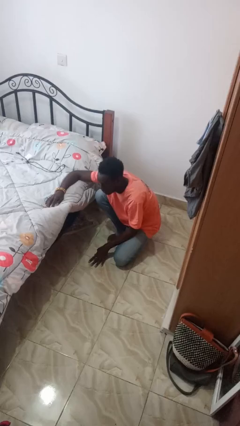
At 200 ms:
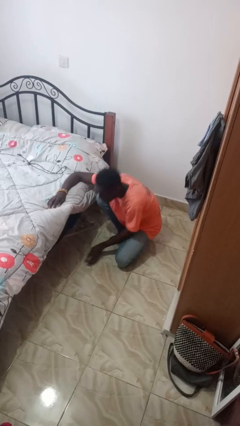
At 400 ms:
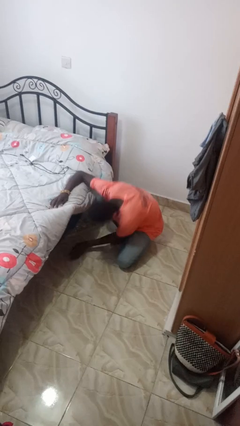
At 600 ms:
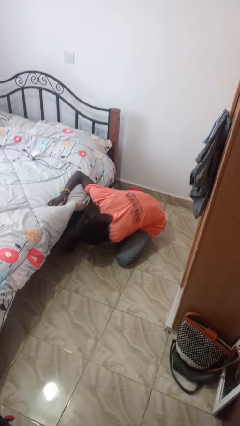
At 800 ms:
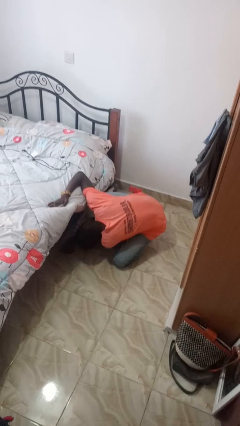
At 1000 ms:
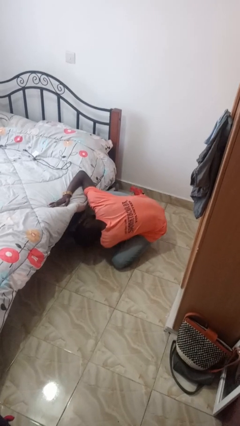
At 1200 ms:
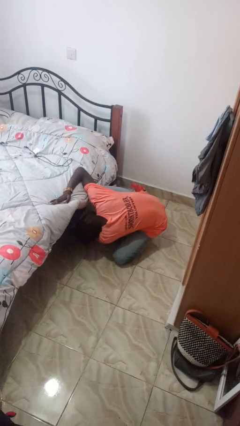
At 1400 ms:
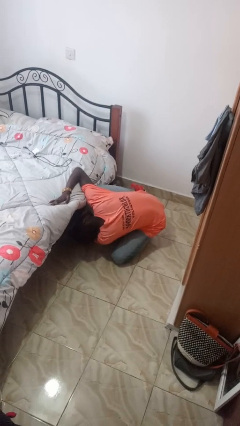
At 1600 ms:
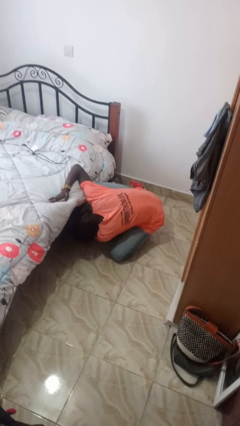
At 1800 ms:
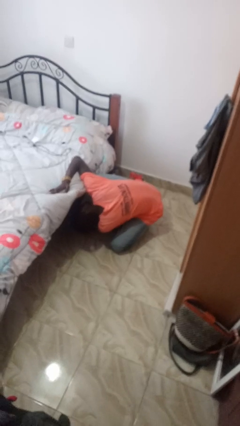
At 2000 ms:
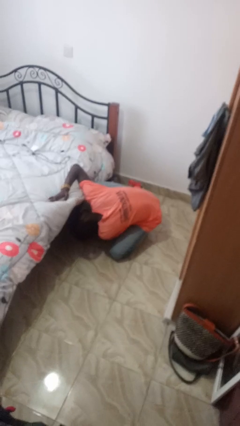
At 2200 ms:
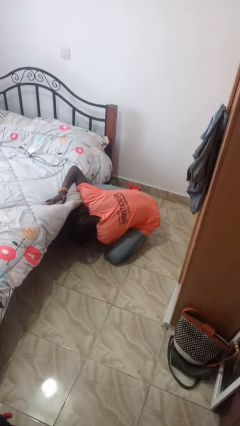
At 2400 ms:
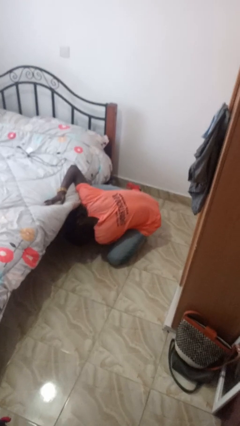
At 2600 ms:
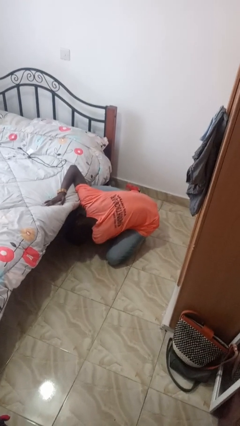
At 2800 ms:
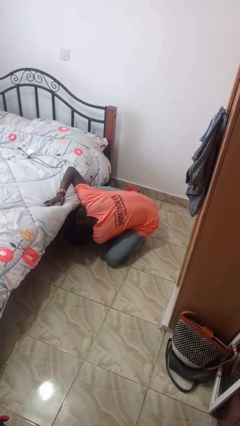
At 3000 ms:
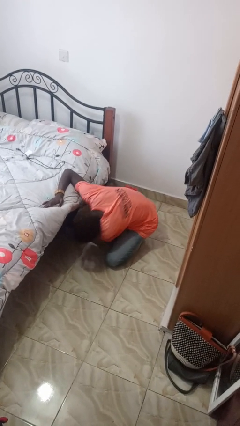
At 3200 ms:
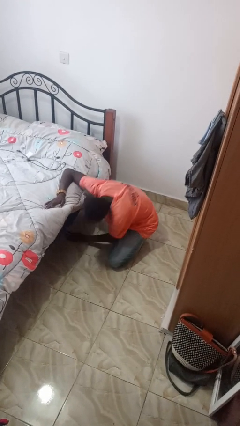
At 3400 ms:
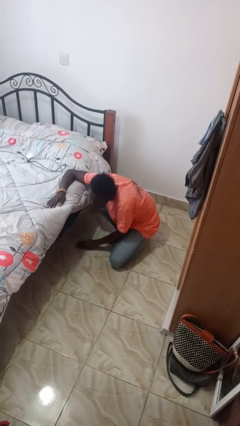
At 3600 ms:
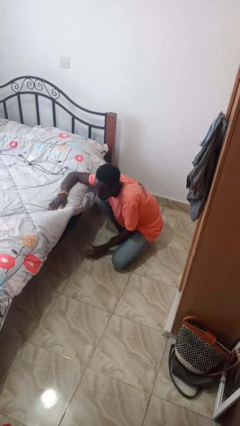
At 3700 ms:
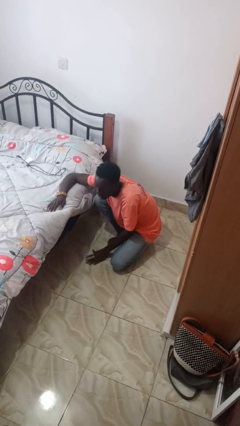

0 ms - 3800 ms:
person searches under bed

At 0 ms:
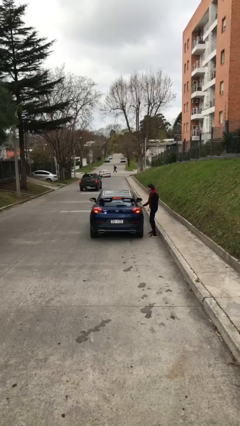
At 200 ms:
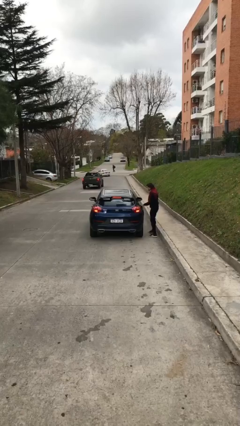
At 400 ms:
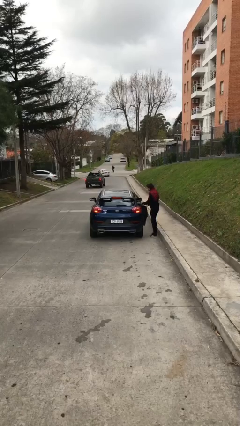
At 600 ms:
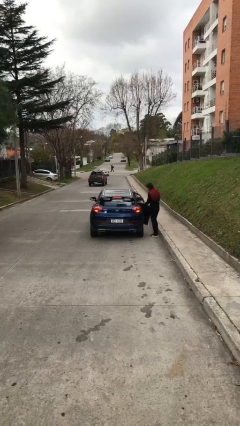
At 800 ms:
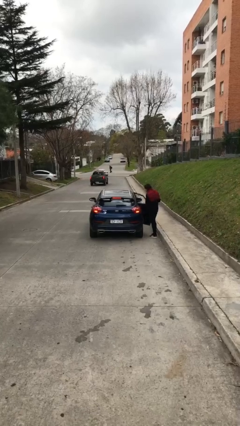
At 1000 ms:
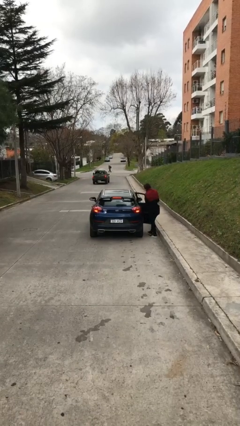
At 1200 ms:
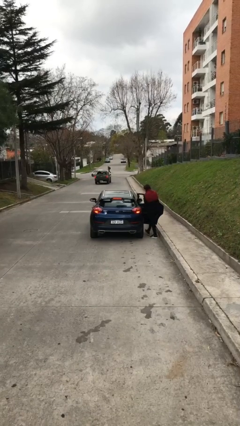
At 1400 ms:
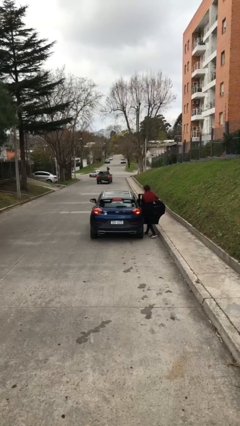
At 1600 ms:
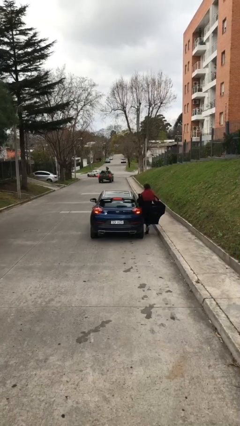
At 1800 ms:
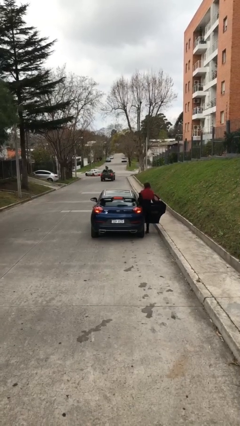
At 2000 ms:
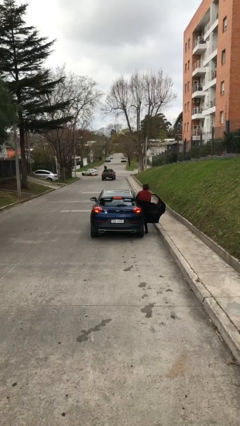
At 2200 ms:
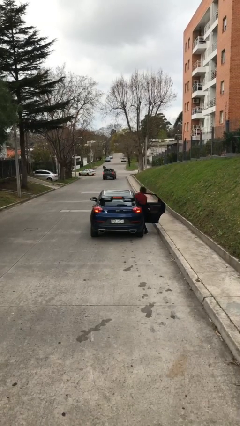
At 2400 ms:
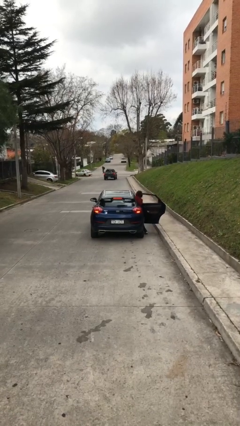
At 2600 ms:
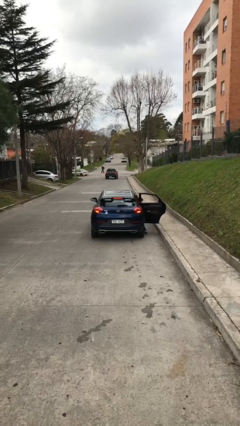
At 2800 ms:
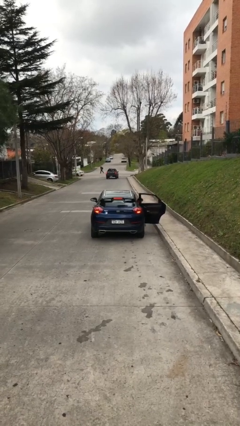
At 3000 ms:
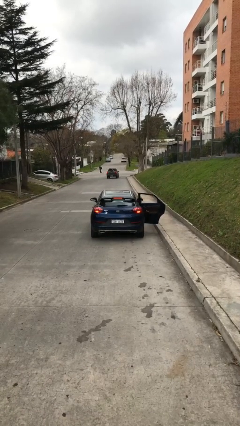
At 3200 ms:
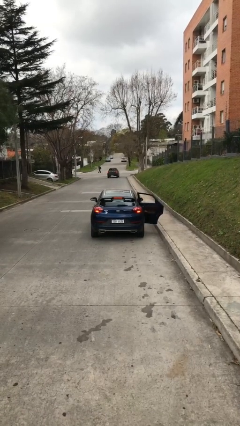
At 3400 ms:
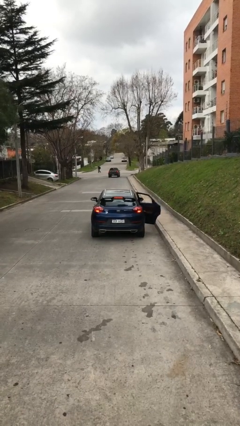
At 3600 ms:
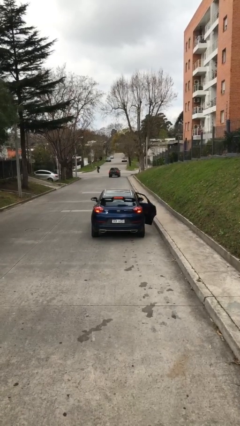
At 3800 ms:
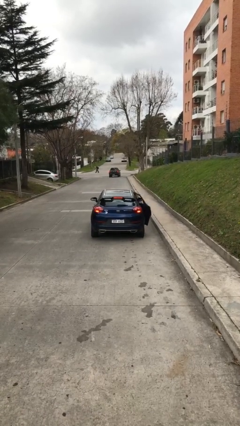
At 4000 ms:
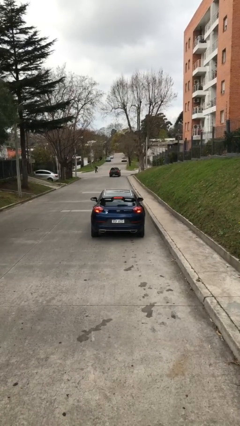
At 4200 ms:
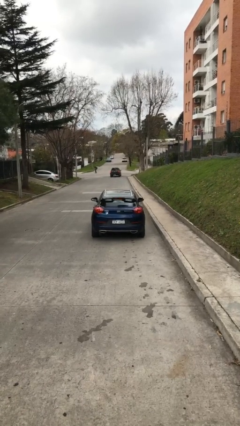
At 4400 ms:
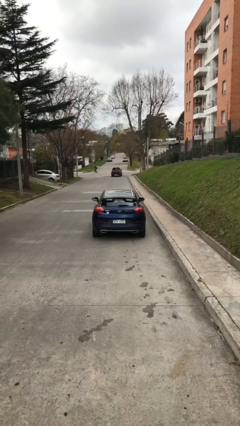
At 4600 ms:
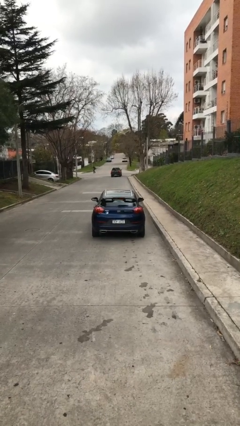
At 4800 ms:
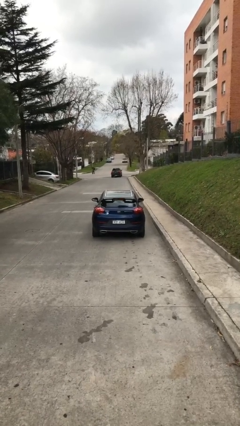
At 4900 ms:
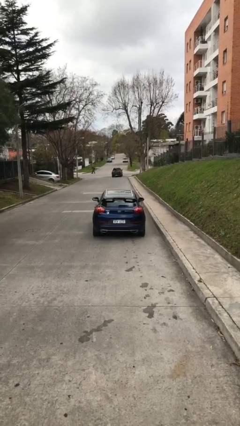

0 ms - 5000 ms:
car picks up person

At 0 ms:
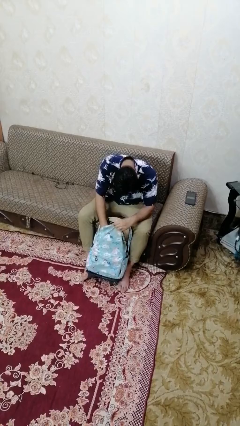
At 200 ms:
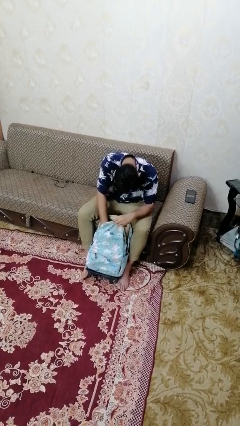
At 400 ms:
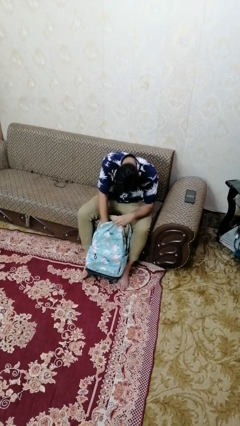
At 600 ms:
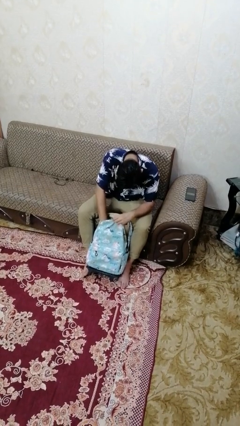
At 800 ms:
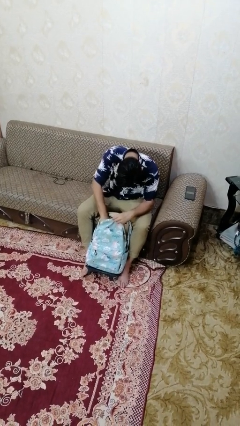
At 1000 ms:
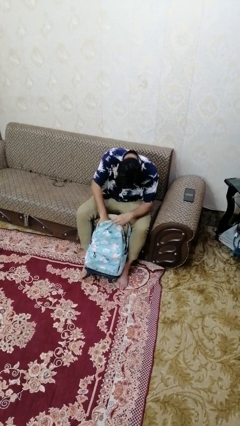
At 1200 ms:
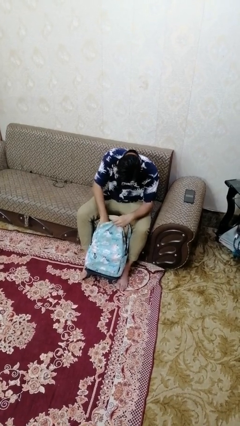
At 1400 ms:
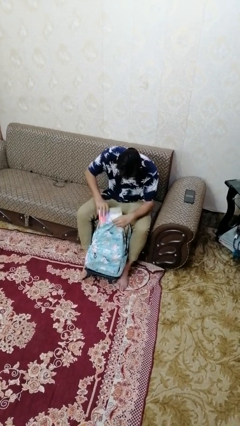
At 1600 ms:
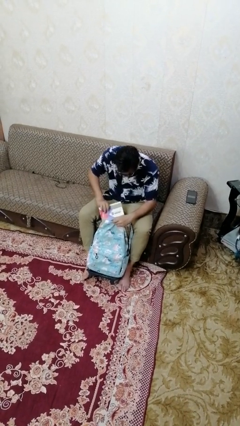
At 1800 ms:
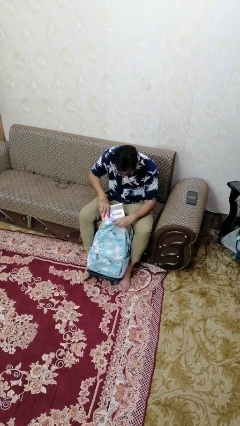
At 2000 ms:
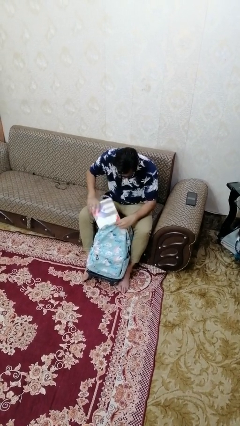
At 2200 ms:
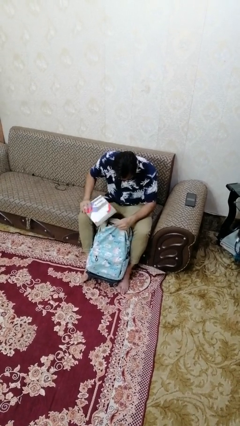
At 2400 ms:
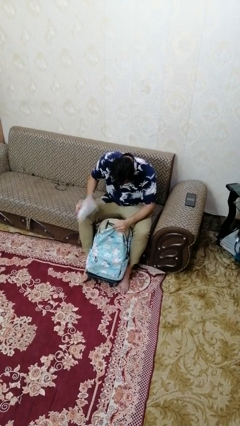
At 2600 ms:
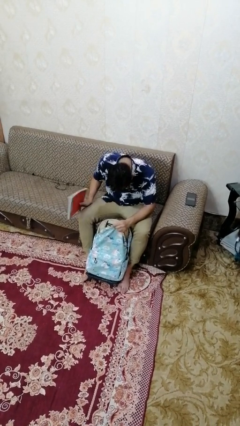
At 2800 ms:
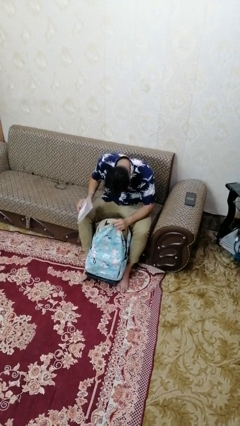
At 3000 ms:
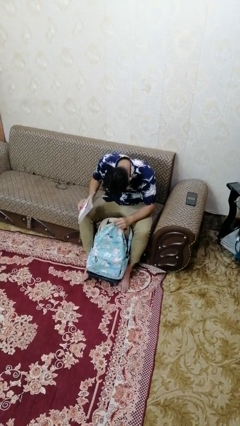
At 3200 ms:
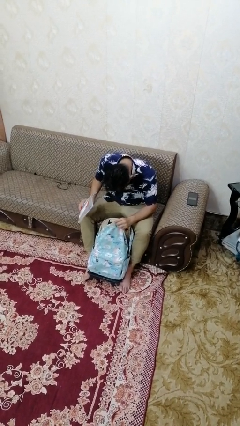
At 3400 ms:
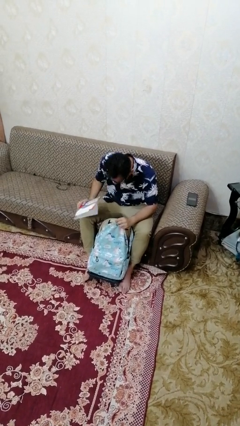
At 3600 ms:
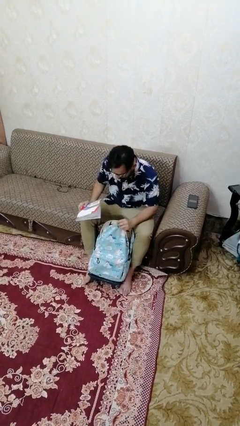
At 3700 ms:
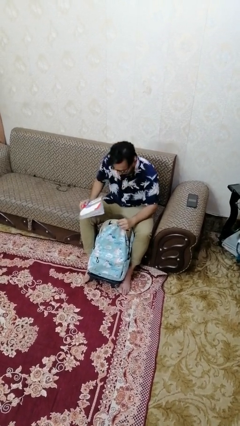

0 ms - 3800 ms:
person takes object from backpack

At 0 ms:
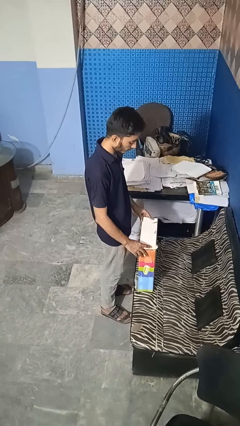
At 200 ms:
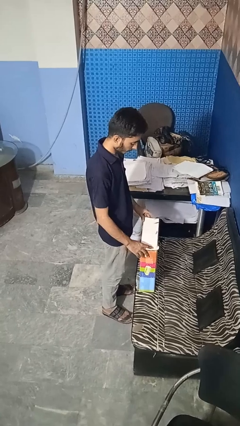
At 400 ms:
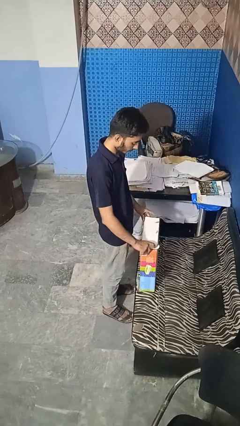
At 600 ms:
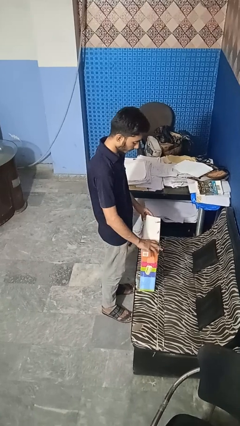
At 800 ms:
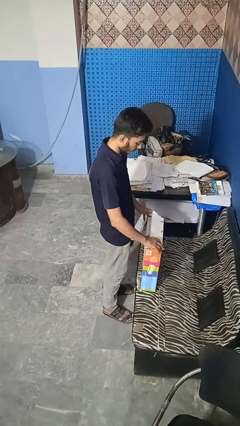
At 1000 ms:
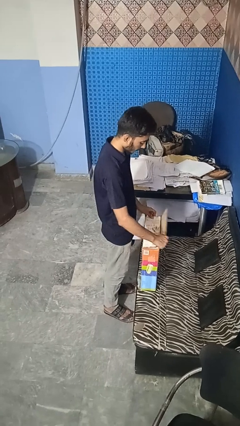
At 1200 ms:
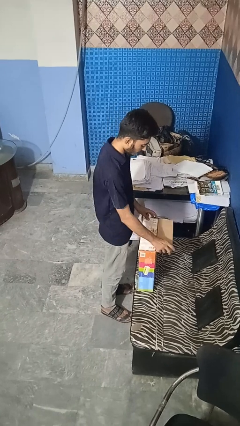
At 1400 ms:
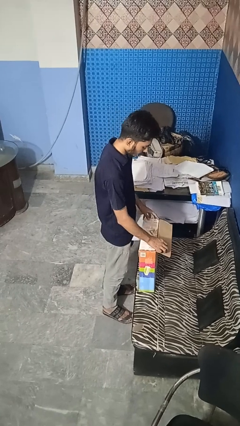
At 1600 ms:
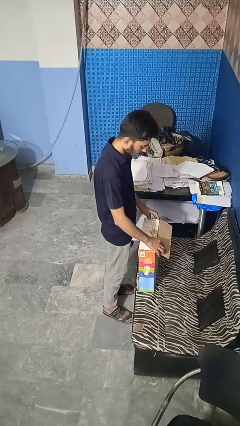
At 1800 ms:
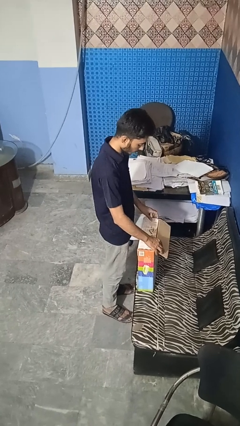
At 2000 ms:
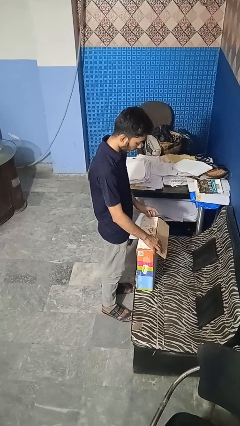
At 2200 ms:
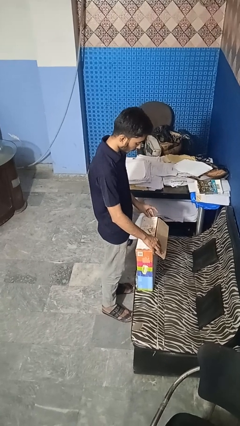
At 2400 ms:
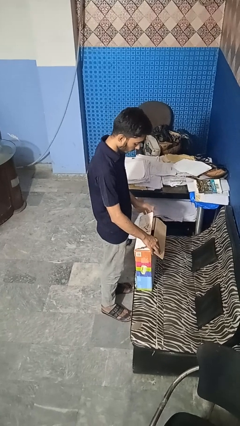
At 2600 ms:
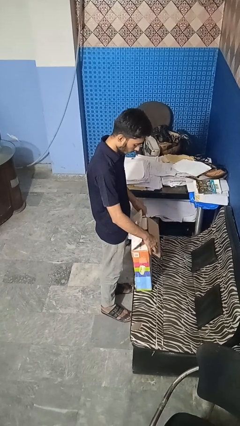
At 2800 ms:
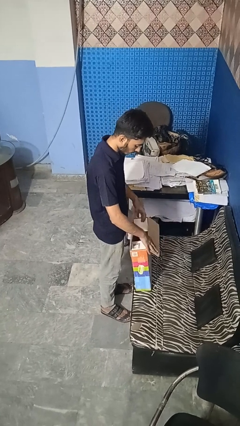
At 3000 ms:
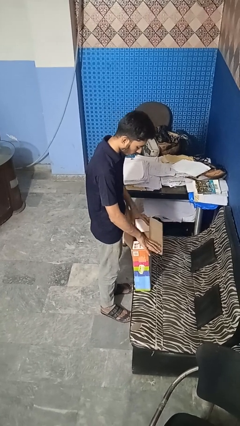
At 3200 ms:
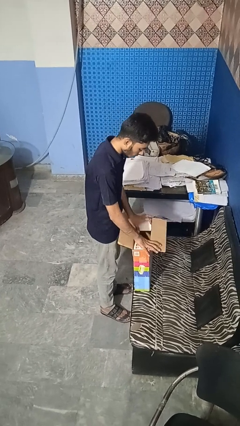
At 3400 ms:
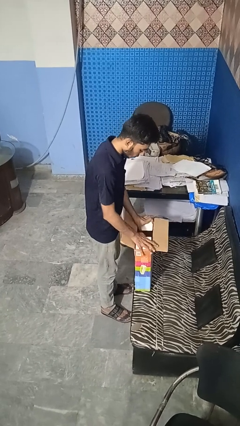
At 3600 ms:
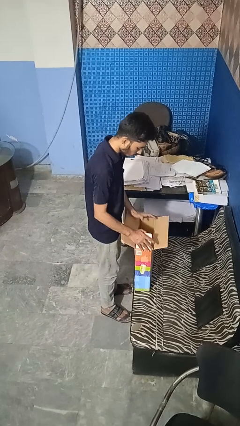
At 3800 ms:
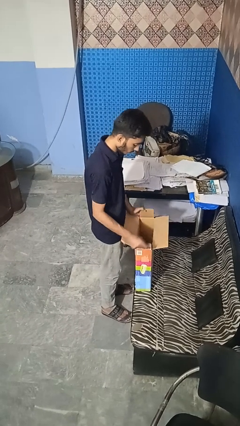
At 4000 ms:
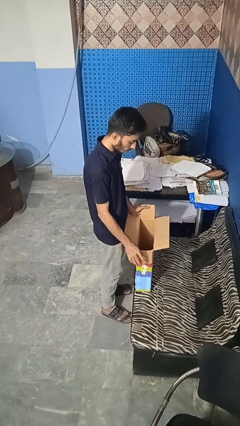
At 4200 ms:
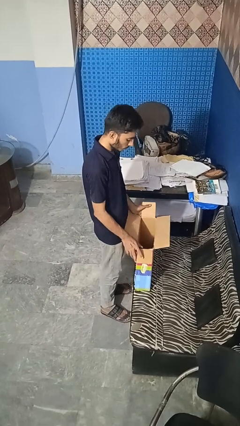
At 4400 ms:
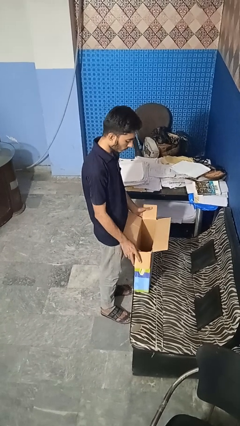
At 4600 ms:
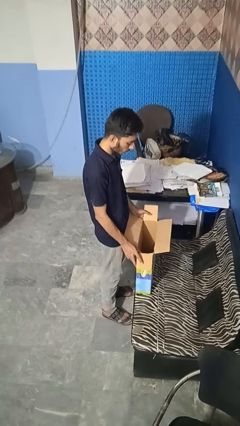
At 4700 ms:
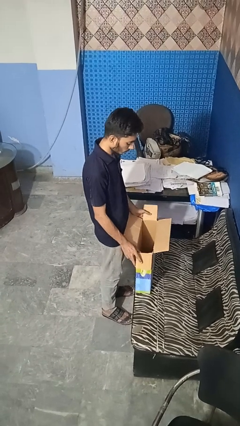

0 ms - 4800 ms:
person opens box

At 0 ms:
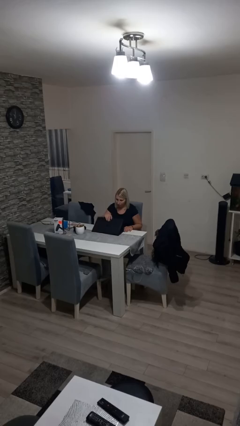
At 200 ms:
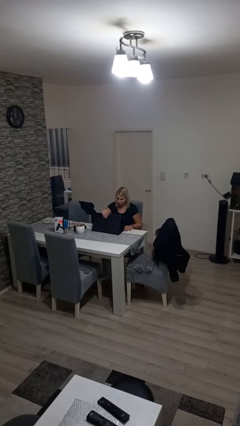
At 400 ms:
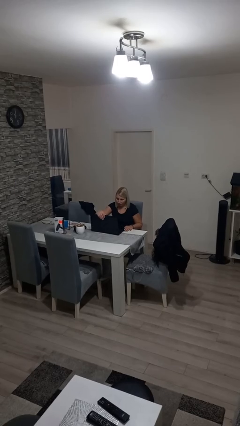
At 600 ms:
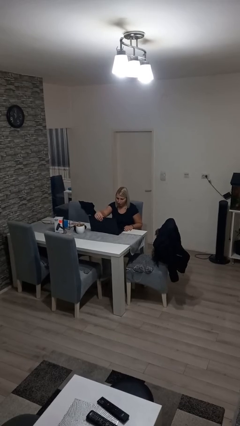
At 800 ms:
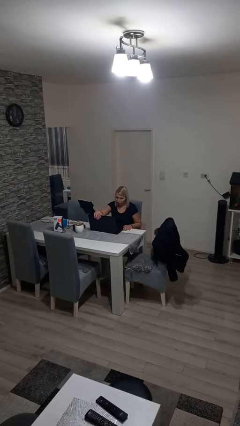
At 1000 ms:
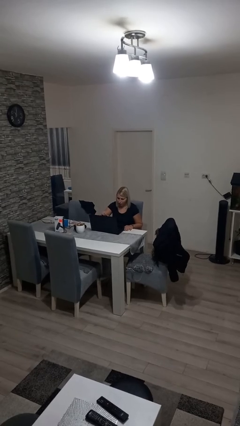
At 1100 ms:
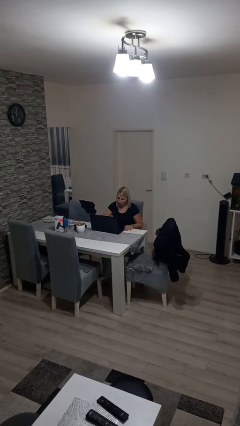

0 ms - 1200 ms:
person opens laptop
